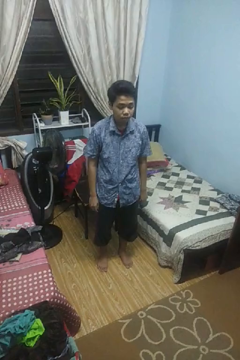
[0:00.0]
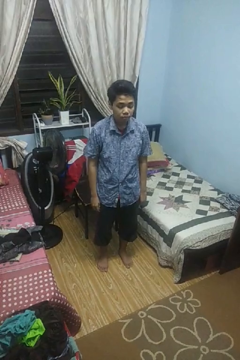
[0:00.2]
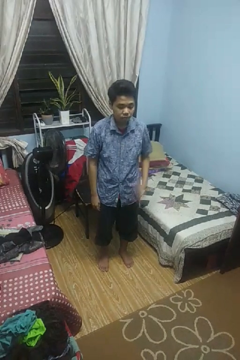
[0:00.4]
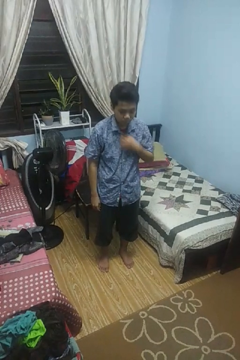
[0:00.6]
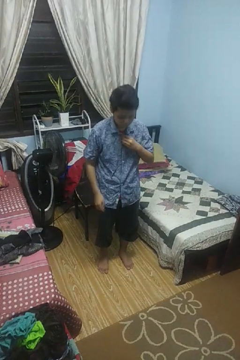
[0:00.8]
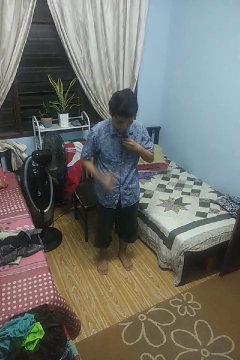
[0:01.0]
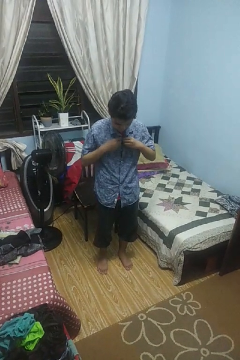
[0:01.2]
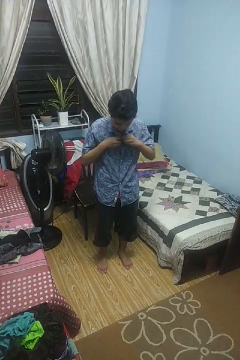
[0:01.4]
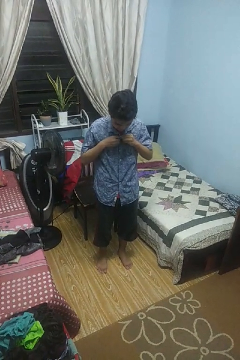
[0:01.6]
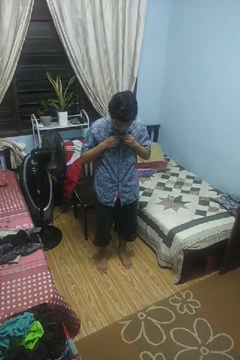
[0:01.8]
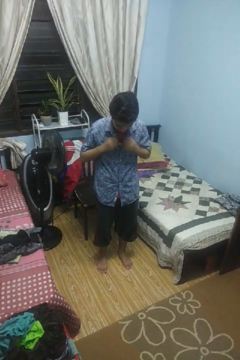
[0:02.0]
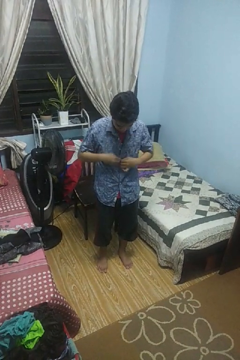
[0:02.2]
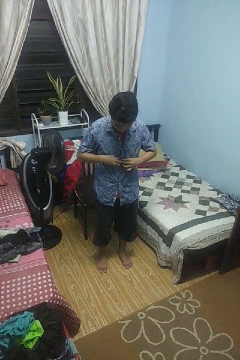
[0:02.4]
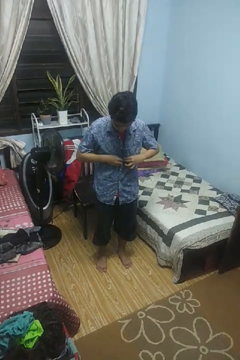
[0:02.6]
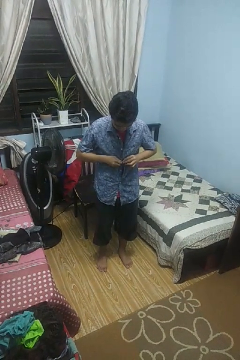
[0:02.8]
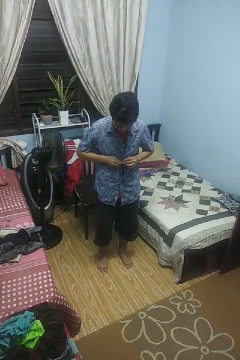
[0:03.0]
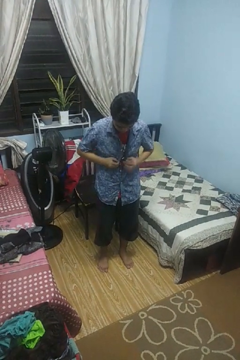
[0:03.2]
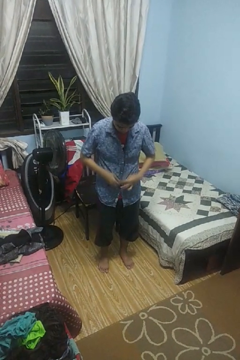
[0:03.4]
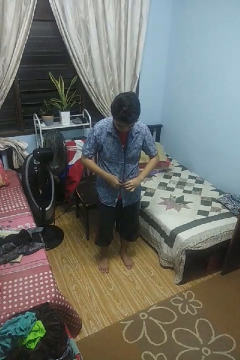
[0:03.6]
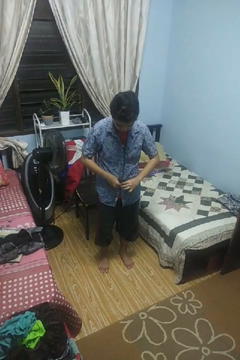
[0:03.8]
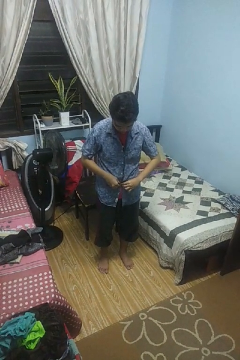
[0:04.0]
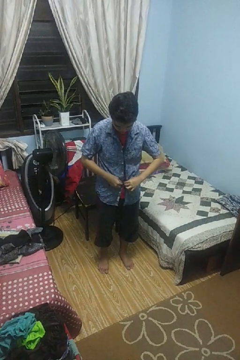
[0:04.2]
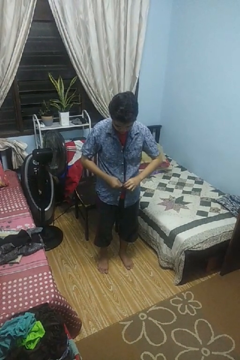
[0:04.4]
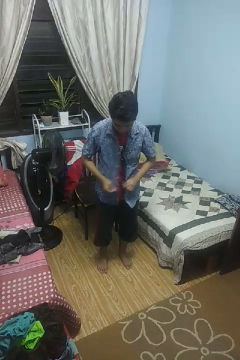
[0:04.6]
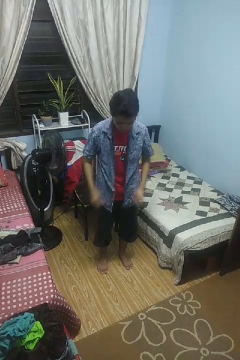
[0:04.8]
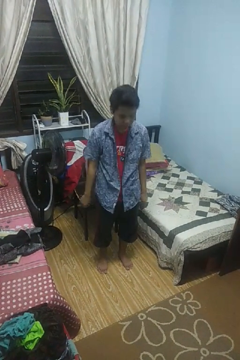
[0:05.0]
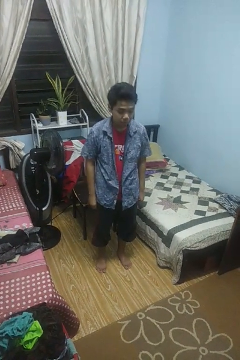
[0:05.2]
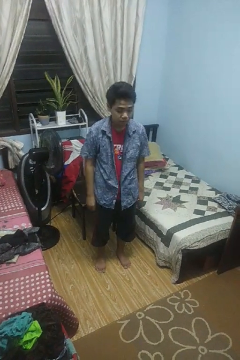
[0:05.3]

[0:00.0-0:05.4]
person unbuttons shirt

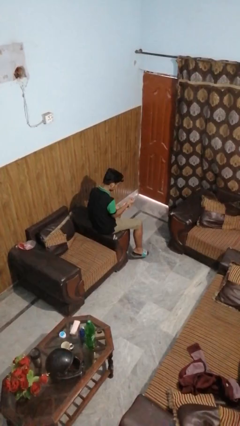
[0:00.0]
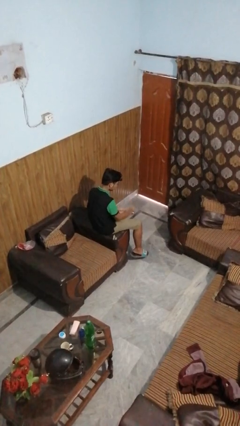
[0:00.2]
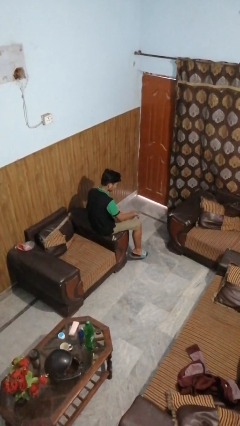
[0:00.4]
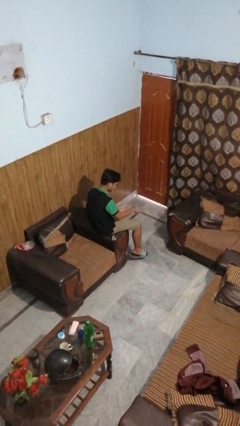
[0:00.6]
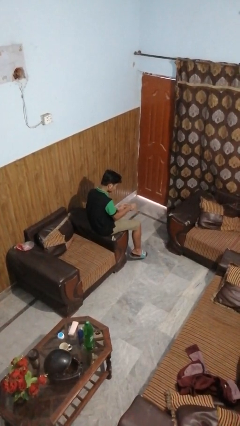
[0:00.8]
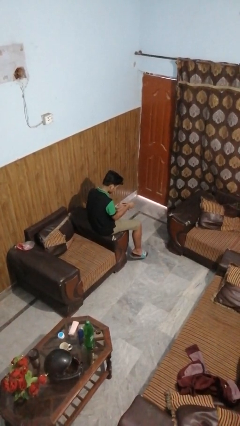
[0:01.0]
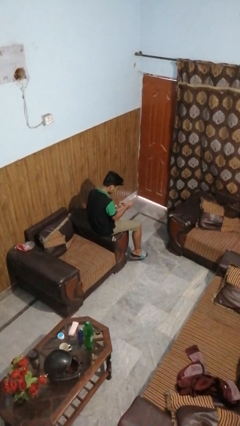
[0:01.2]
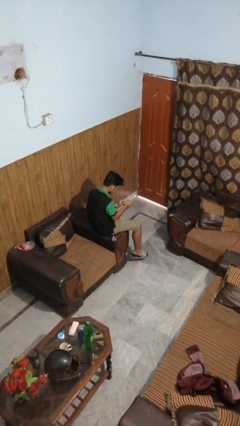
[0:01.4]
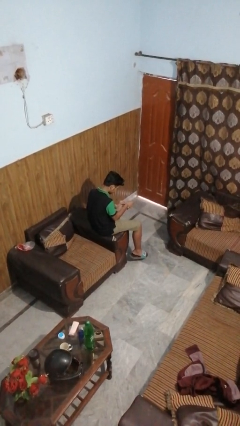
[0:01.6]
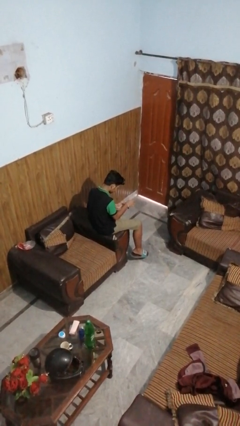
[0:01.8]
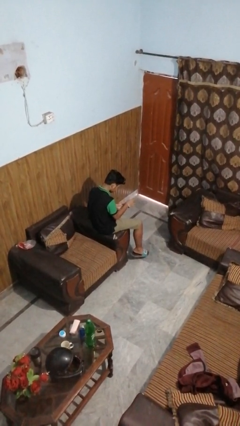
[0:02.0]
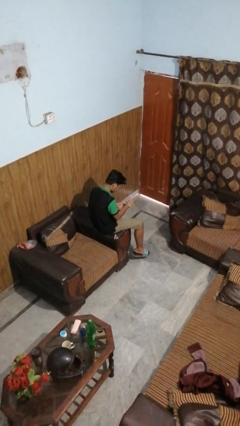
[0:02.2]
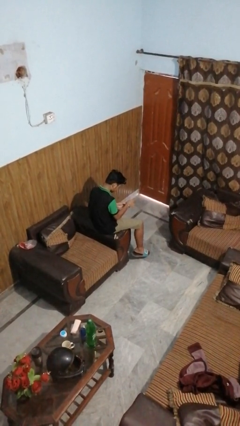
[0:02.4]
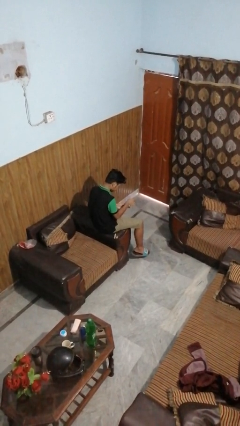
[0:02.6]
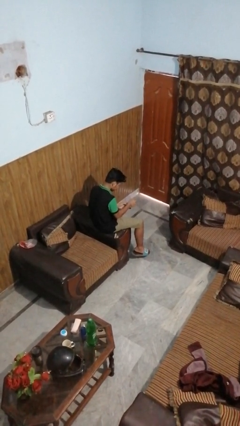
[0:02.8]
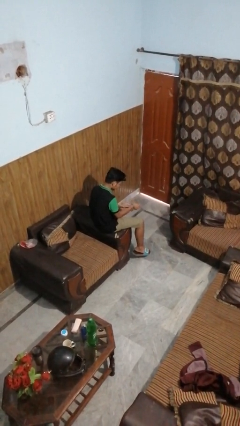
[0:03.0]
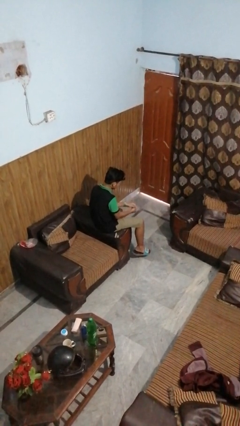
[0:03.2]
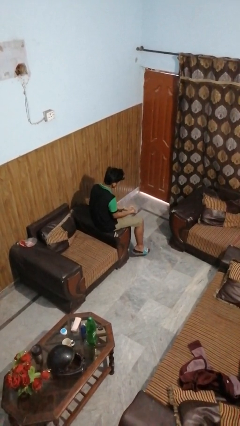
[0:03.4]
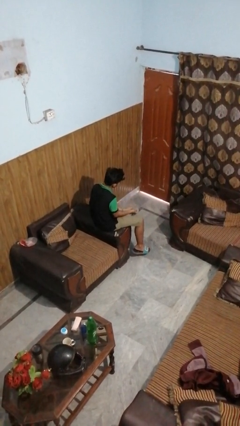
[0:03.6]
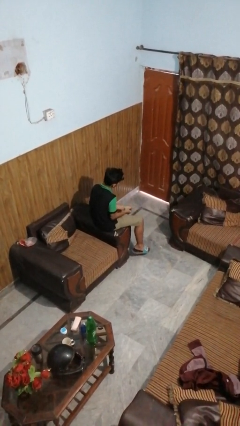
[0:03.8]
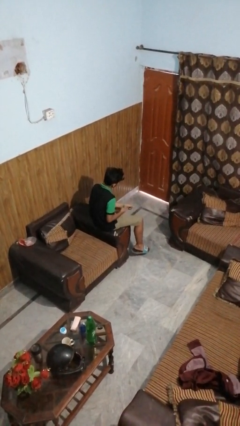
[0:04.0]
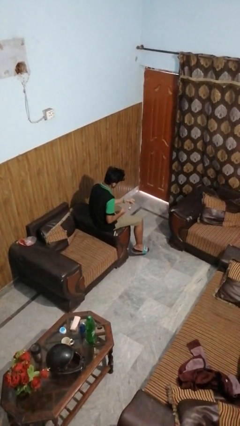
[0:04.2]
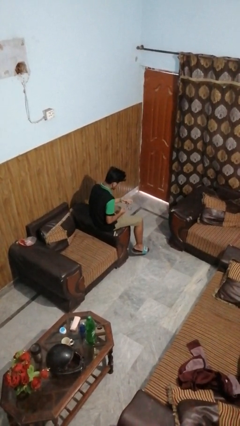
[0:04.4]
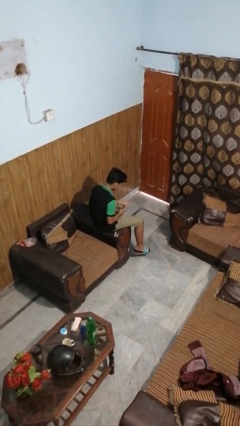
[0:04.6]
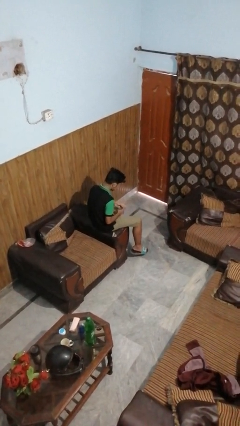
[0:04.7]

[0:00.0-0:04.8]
person takes off wristwatch

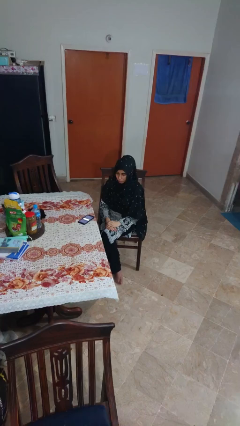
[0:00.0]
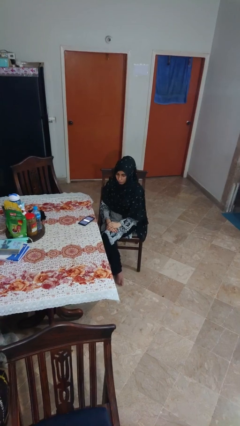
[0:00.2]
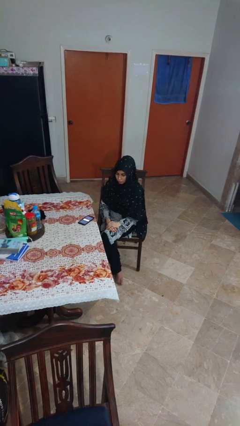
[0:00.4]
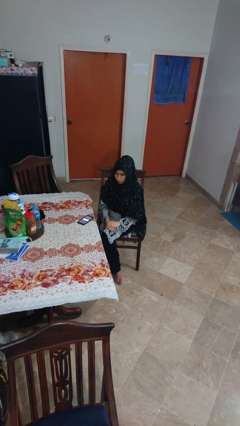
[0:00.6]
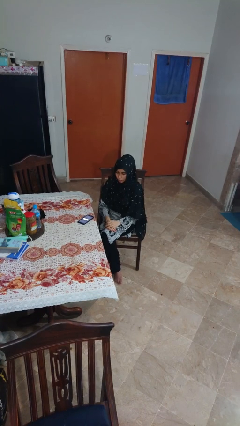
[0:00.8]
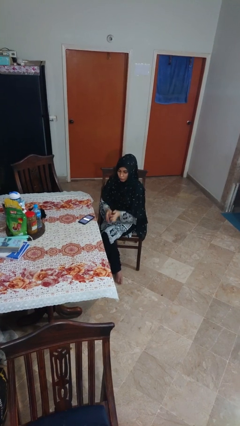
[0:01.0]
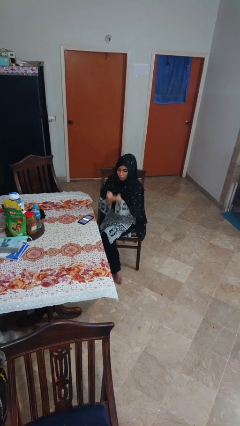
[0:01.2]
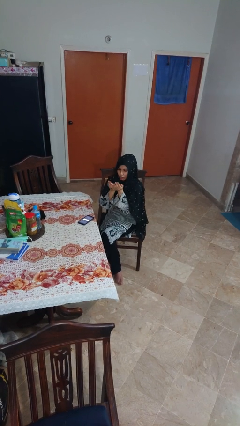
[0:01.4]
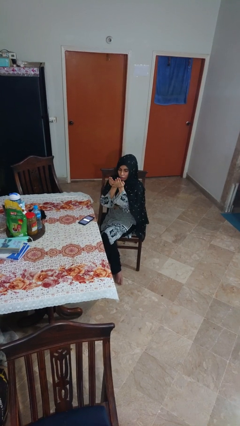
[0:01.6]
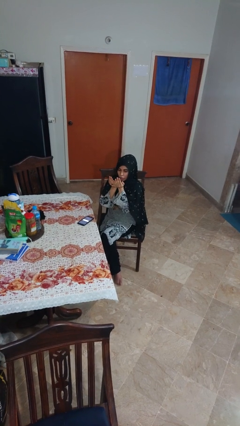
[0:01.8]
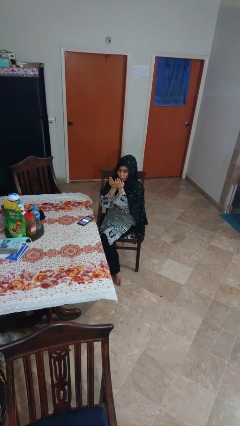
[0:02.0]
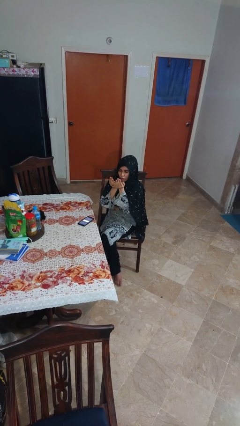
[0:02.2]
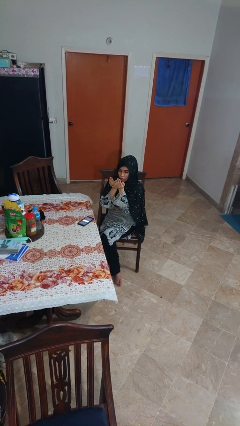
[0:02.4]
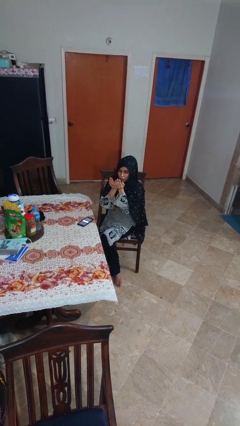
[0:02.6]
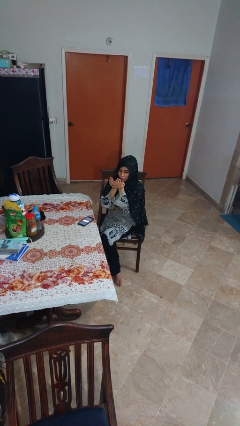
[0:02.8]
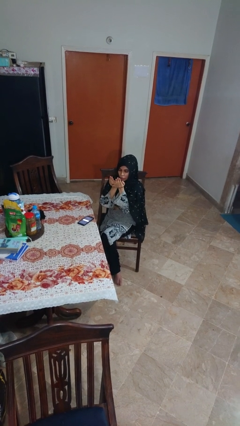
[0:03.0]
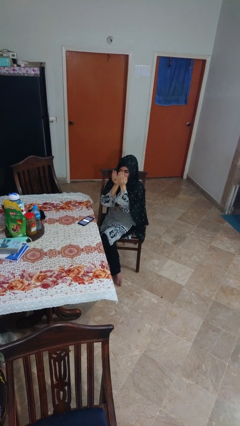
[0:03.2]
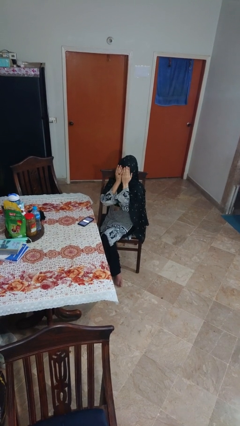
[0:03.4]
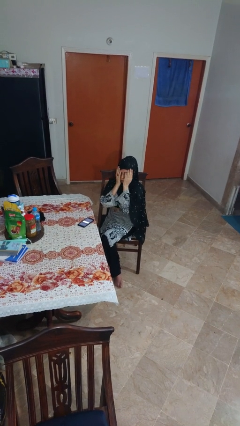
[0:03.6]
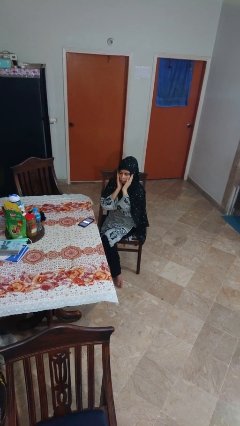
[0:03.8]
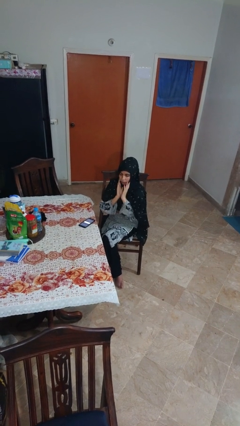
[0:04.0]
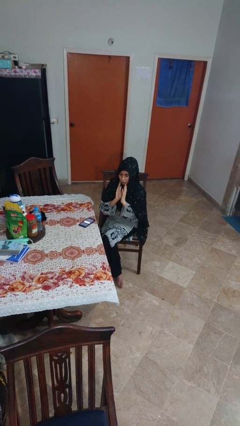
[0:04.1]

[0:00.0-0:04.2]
person prays

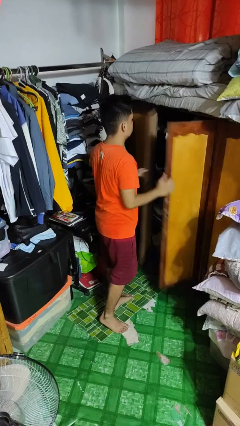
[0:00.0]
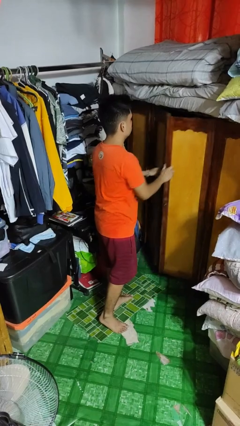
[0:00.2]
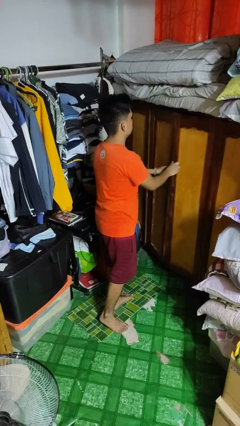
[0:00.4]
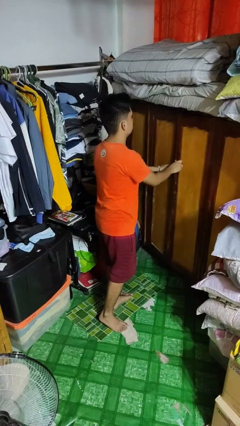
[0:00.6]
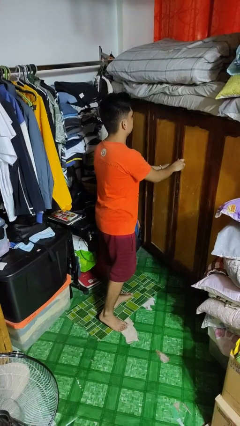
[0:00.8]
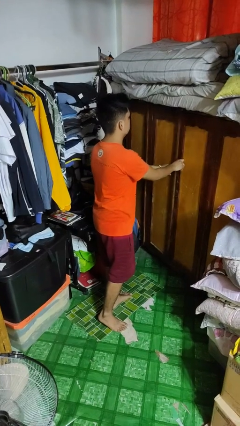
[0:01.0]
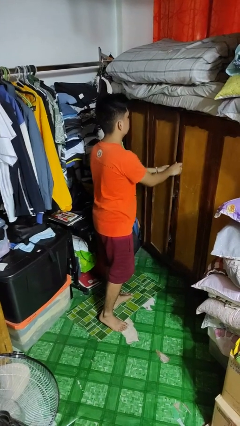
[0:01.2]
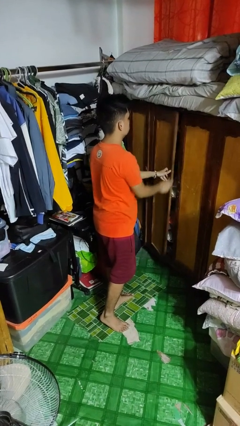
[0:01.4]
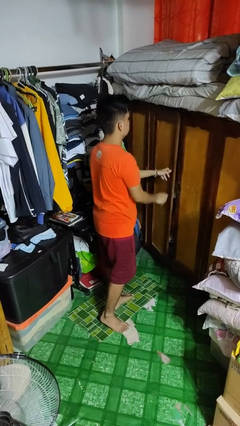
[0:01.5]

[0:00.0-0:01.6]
person closes closet door

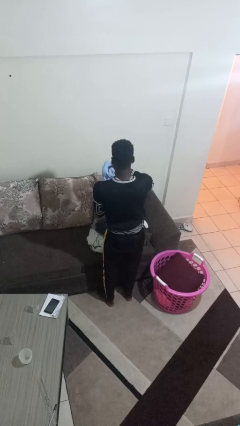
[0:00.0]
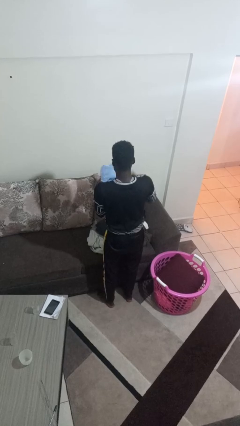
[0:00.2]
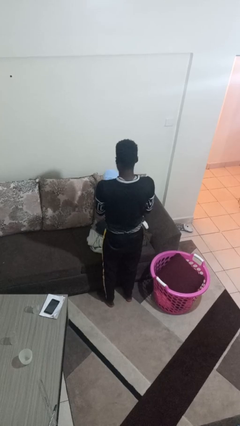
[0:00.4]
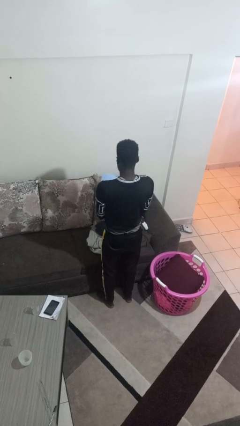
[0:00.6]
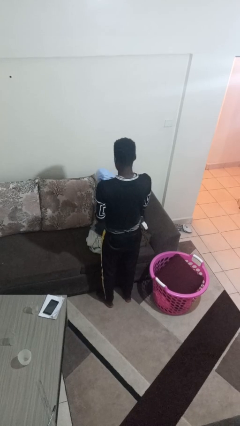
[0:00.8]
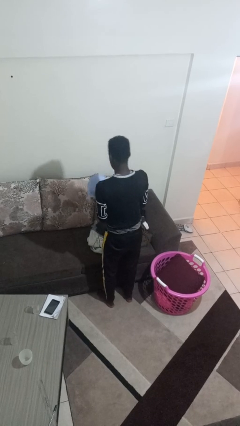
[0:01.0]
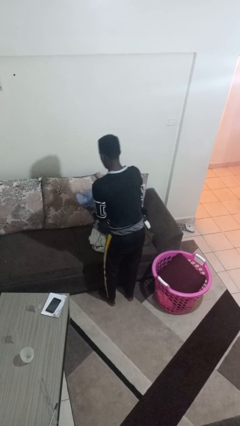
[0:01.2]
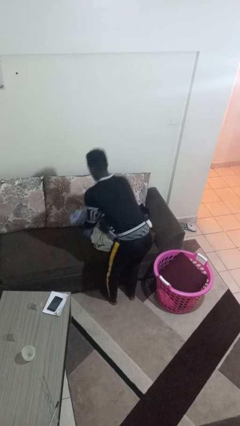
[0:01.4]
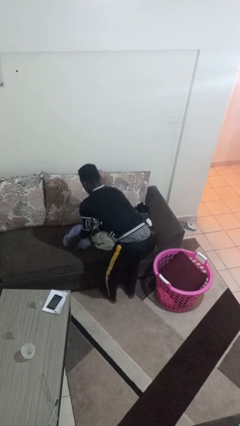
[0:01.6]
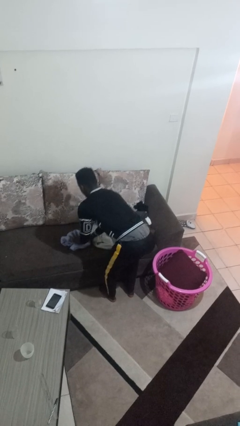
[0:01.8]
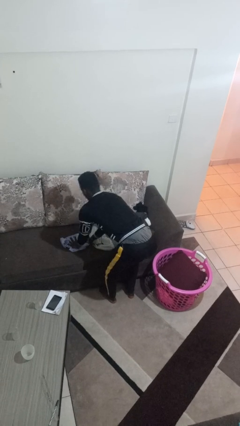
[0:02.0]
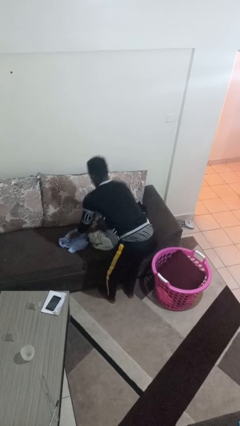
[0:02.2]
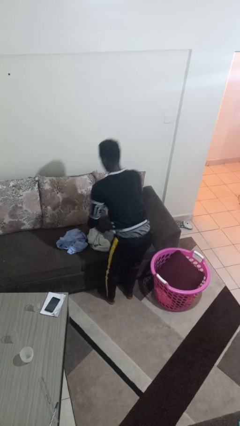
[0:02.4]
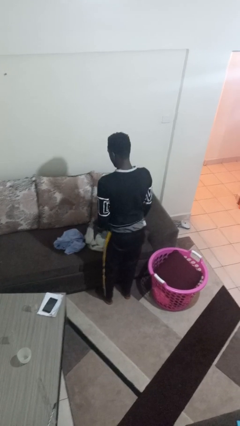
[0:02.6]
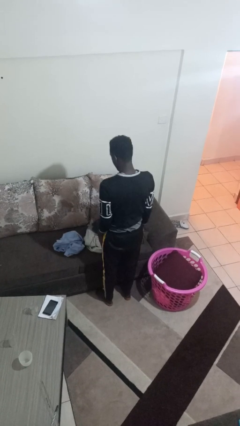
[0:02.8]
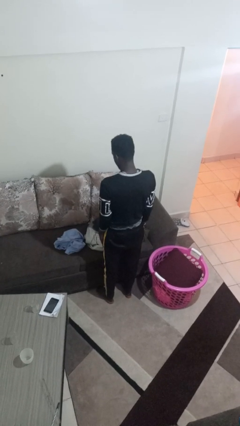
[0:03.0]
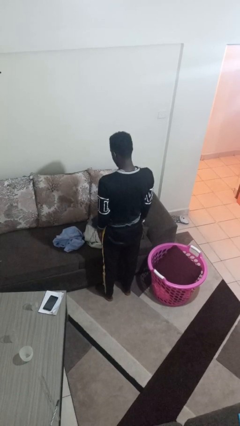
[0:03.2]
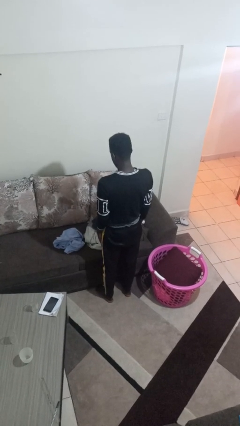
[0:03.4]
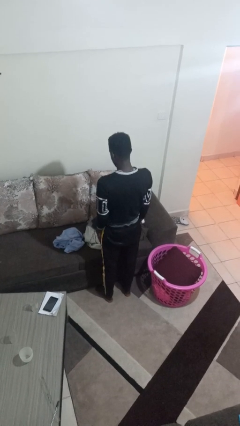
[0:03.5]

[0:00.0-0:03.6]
person folds shirt
